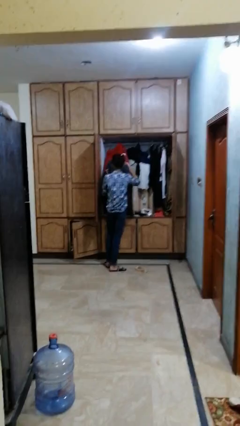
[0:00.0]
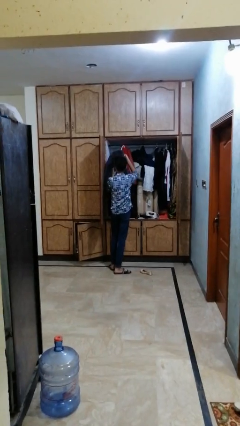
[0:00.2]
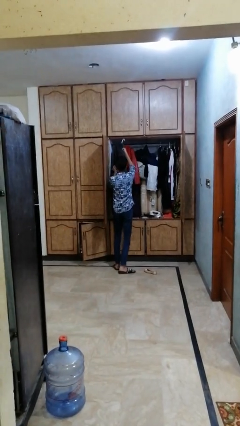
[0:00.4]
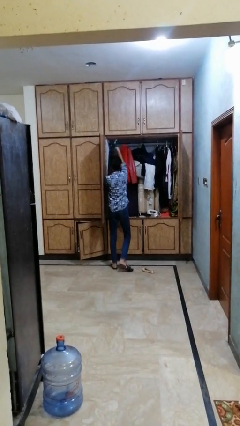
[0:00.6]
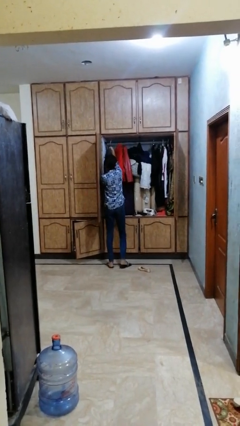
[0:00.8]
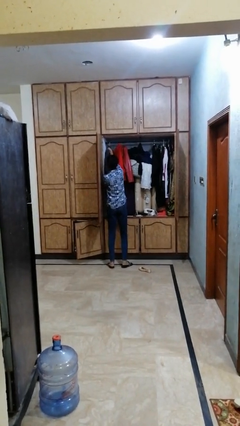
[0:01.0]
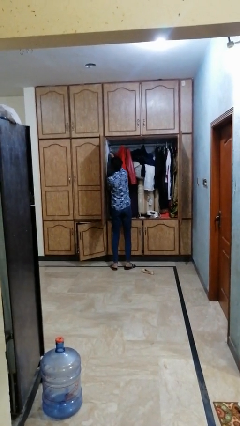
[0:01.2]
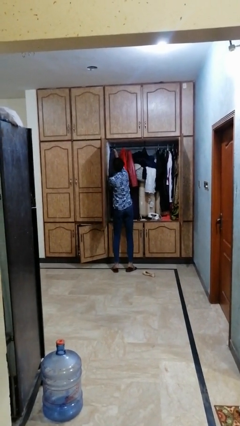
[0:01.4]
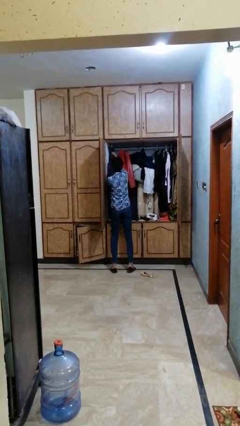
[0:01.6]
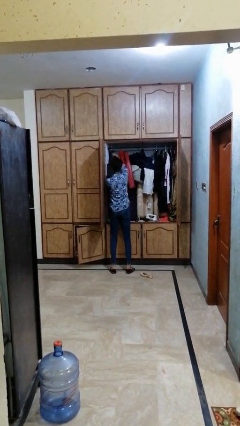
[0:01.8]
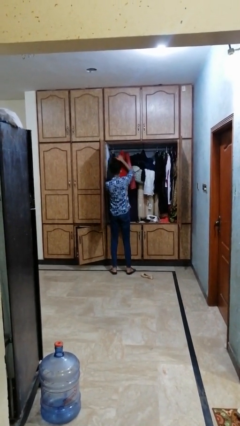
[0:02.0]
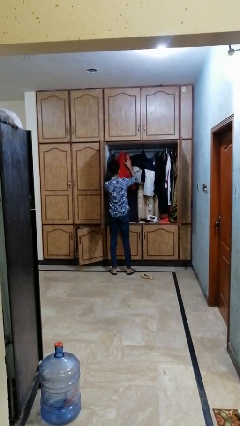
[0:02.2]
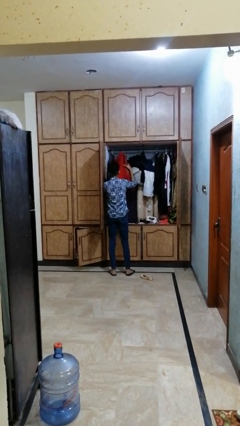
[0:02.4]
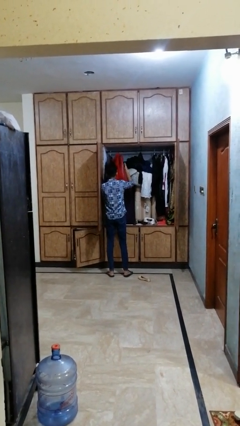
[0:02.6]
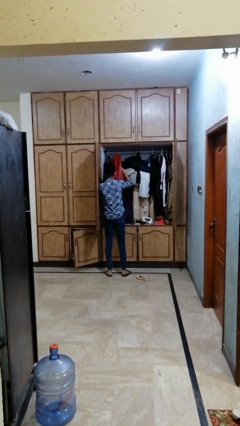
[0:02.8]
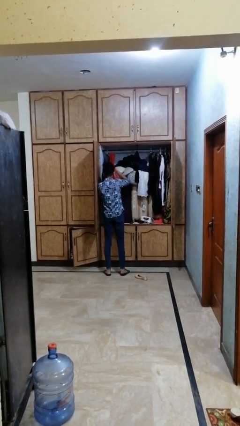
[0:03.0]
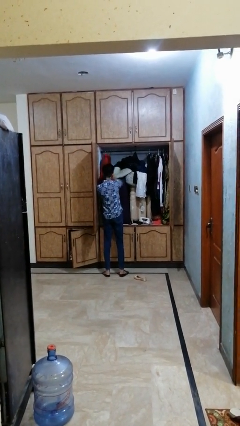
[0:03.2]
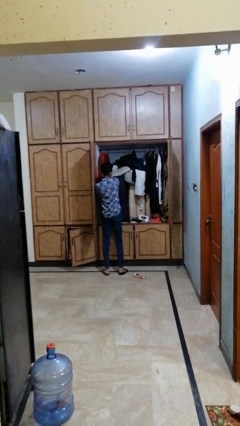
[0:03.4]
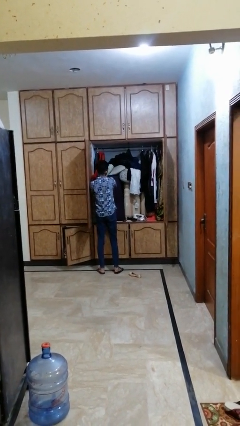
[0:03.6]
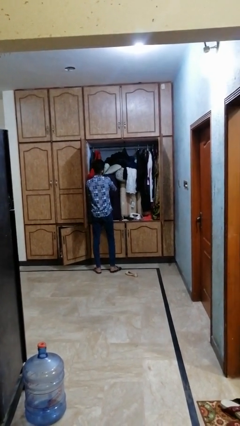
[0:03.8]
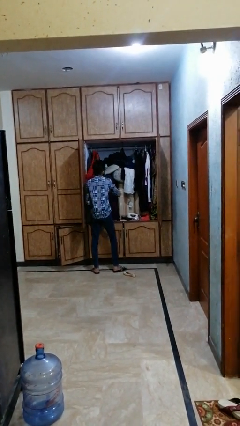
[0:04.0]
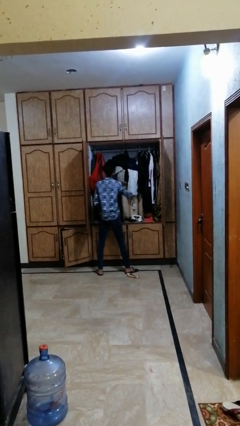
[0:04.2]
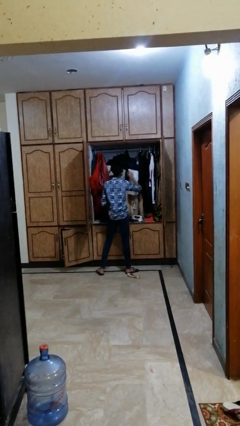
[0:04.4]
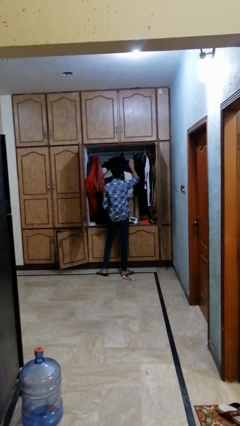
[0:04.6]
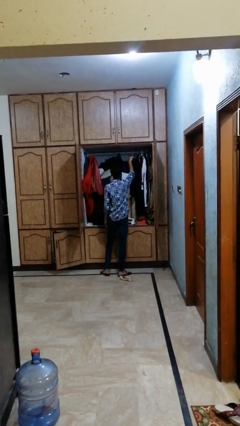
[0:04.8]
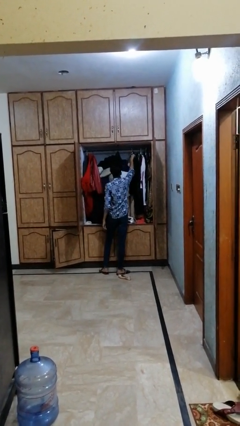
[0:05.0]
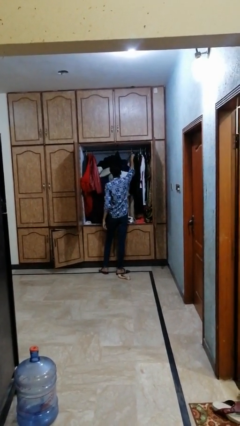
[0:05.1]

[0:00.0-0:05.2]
person puts clothes into dresser

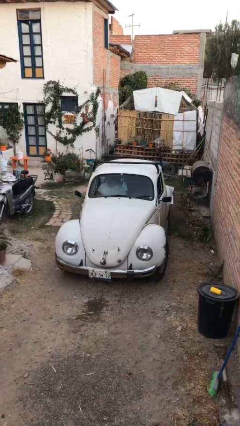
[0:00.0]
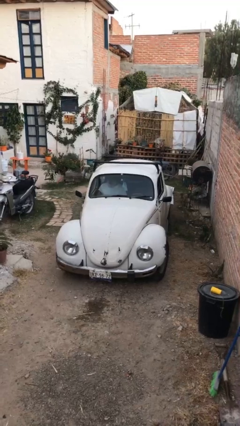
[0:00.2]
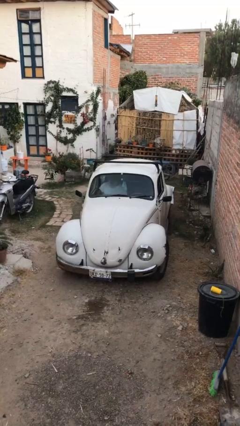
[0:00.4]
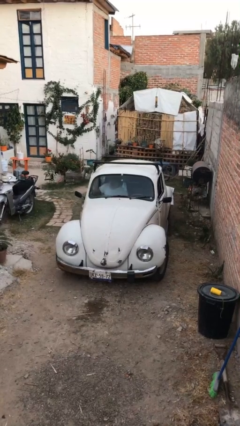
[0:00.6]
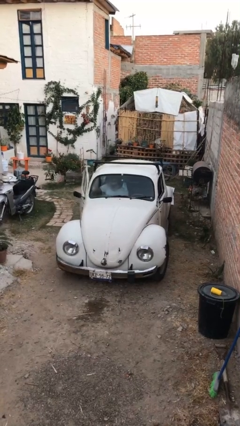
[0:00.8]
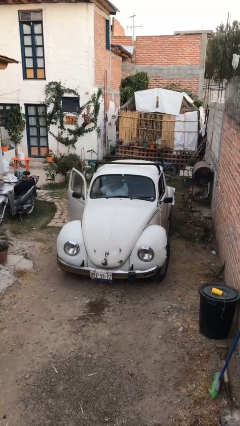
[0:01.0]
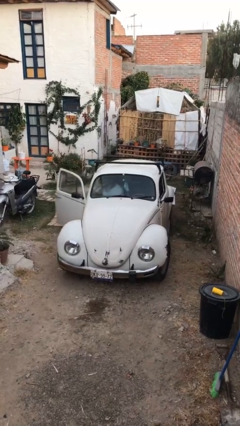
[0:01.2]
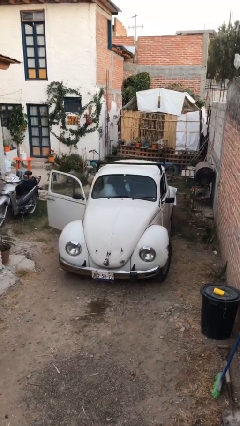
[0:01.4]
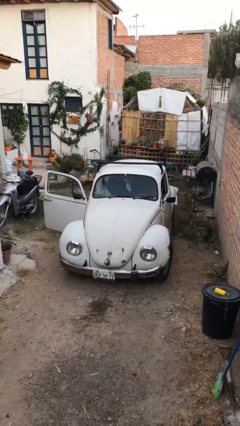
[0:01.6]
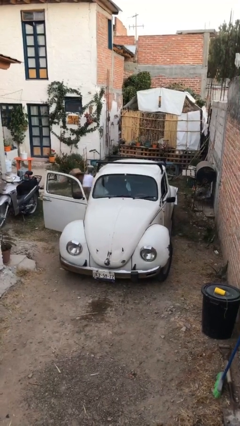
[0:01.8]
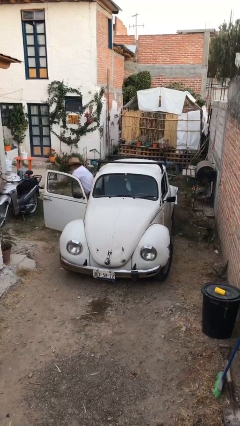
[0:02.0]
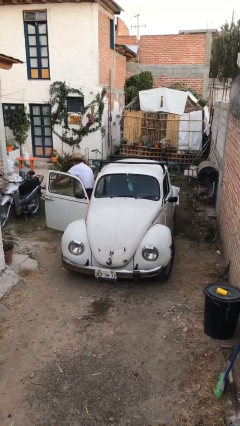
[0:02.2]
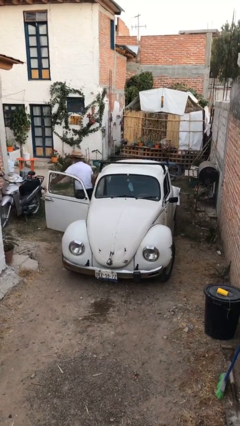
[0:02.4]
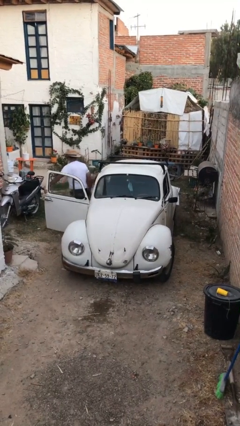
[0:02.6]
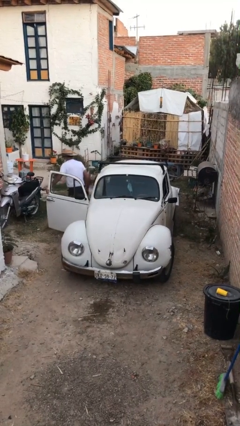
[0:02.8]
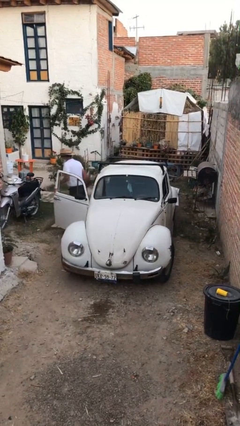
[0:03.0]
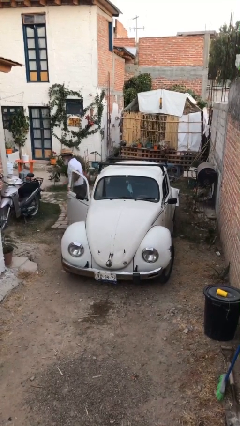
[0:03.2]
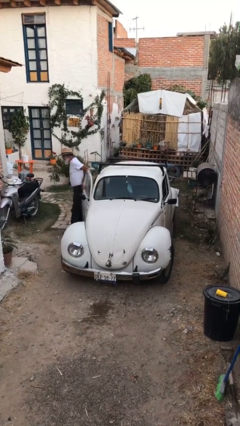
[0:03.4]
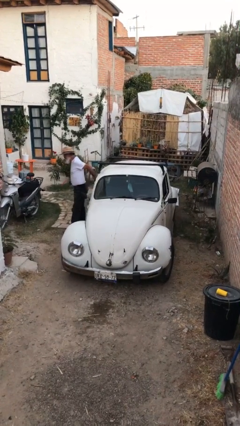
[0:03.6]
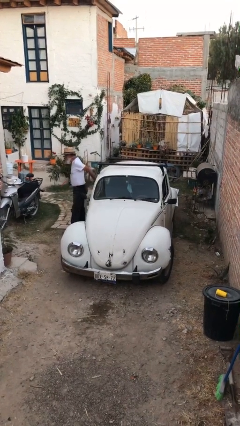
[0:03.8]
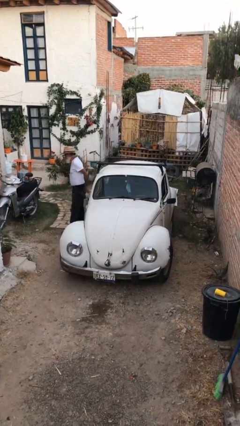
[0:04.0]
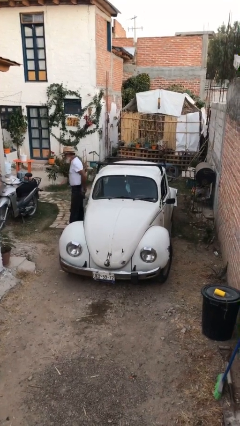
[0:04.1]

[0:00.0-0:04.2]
car drops off person

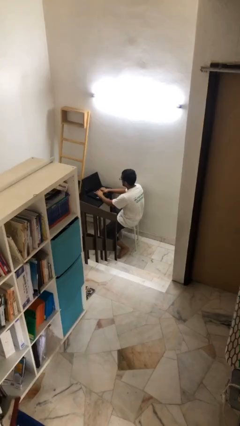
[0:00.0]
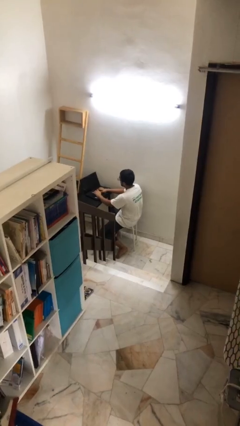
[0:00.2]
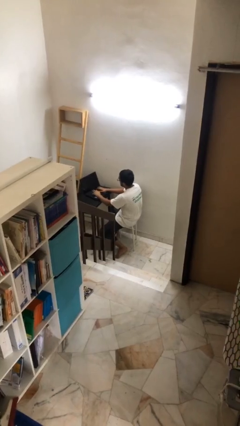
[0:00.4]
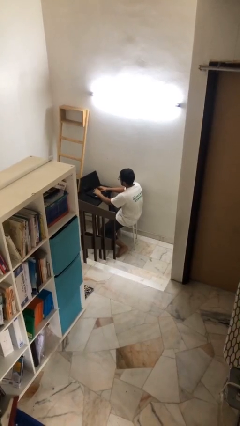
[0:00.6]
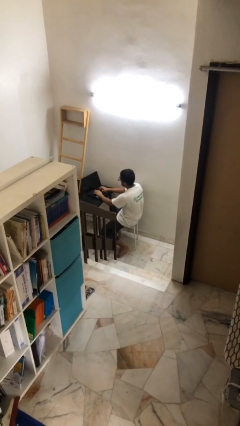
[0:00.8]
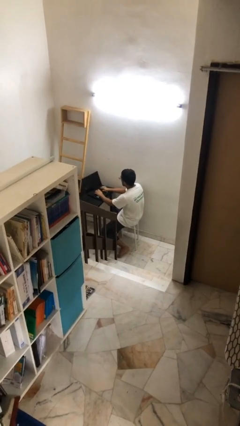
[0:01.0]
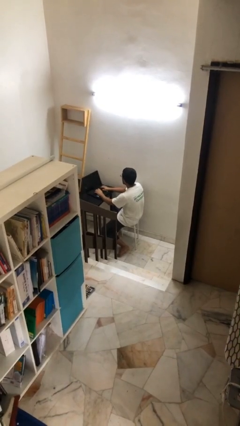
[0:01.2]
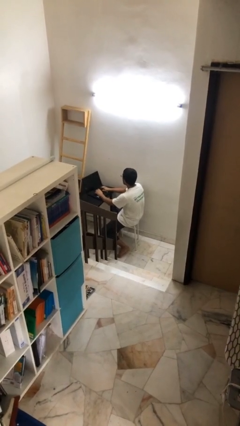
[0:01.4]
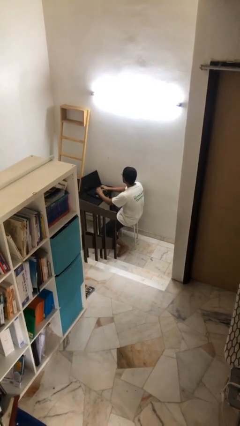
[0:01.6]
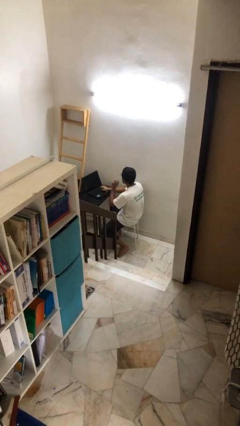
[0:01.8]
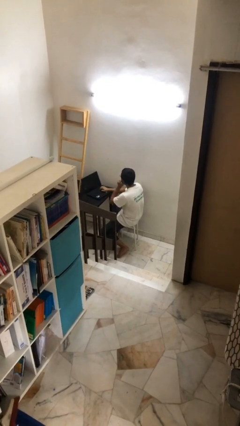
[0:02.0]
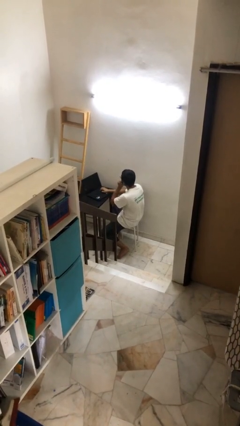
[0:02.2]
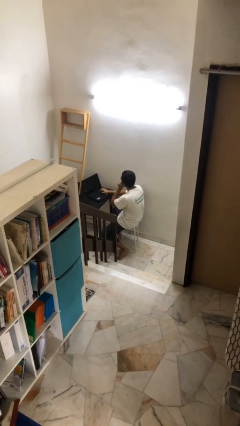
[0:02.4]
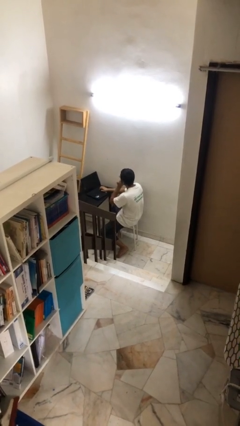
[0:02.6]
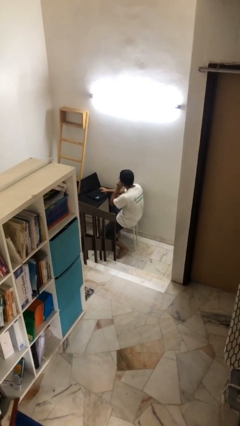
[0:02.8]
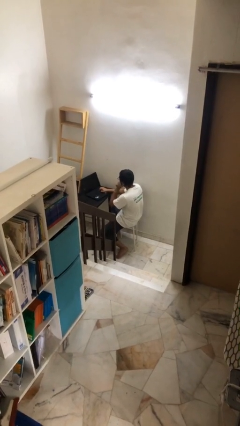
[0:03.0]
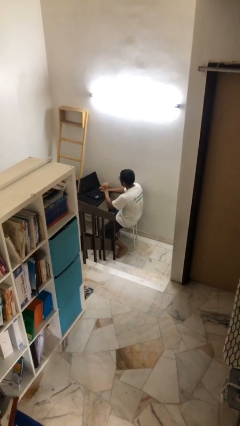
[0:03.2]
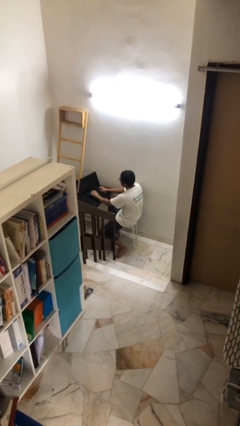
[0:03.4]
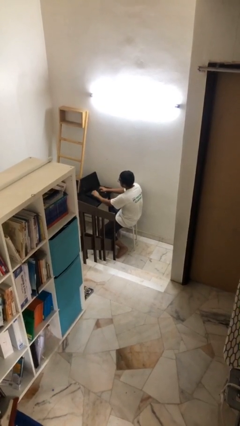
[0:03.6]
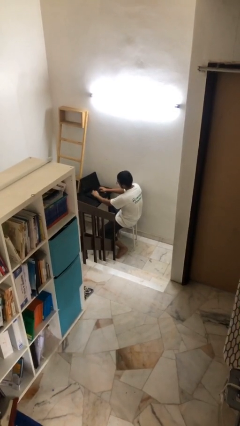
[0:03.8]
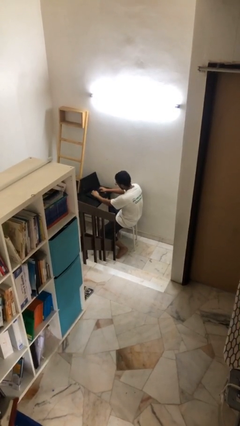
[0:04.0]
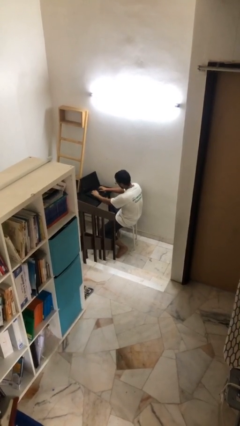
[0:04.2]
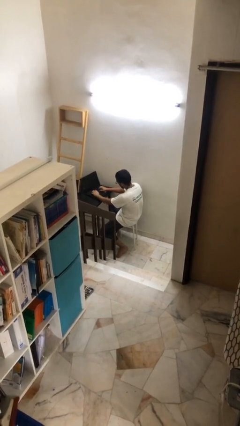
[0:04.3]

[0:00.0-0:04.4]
person interacts with laptop

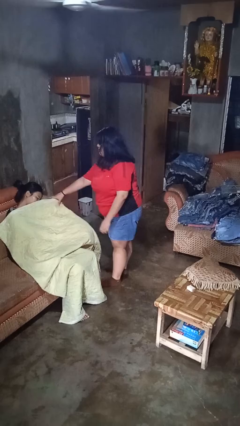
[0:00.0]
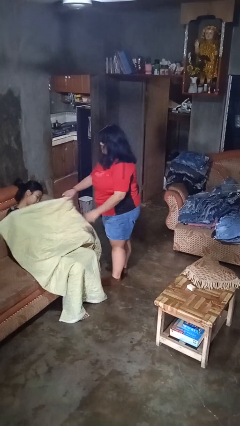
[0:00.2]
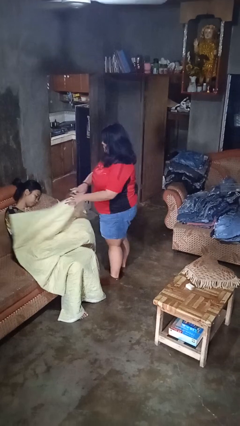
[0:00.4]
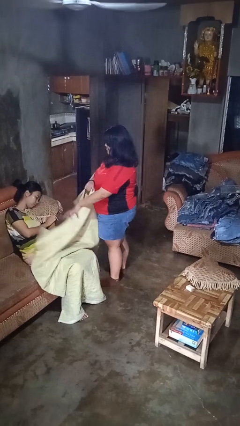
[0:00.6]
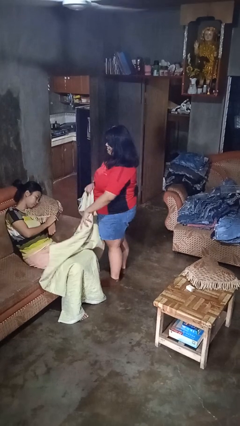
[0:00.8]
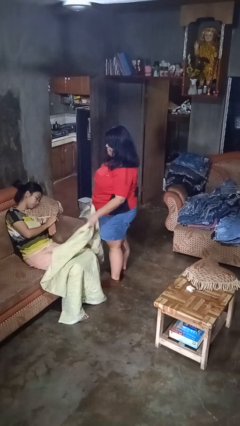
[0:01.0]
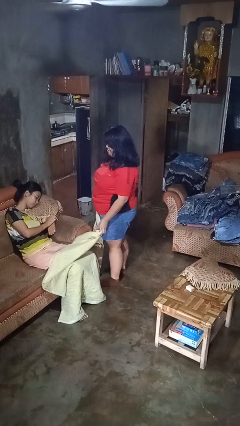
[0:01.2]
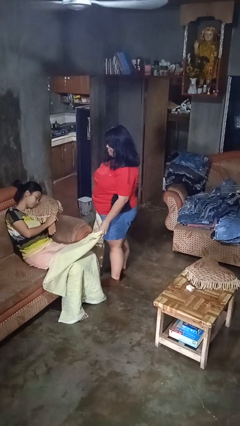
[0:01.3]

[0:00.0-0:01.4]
person uncovers friend with blanket

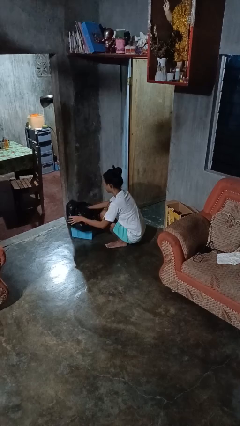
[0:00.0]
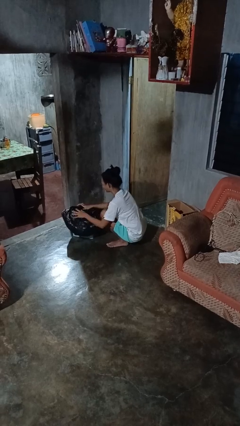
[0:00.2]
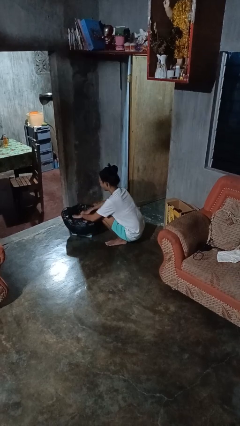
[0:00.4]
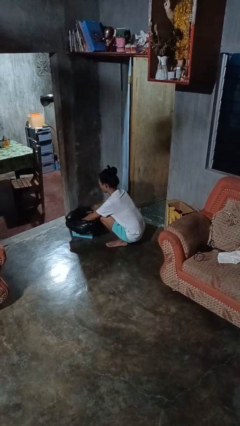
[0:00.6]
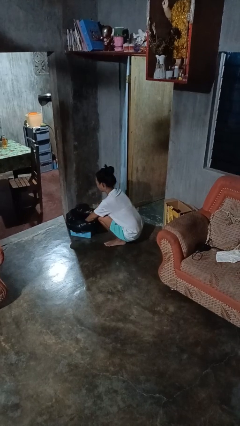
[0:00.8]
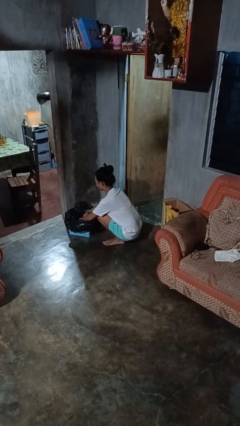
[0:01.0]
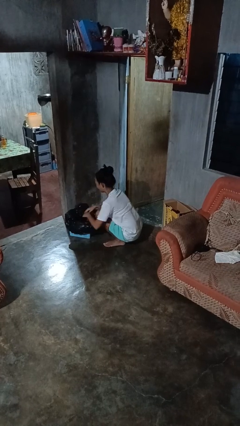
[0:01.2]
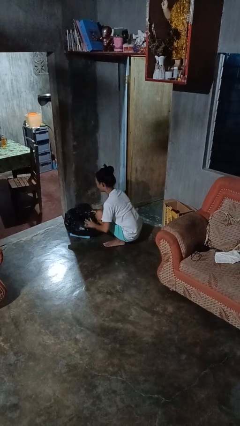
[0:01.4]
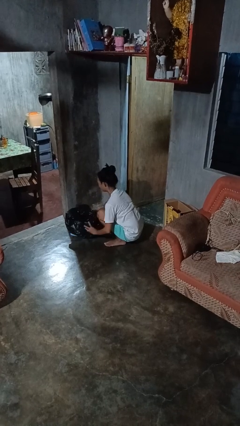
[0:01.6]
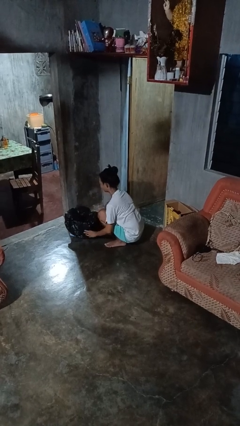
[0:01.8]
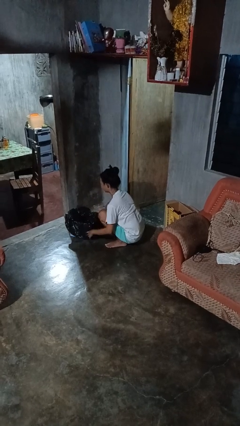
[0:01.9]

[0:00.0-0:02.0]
person inserts trashbag into trashcan

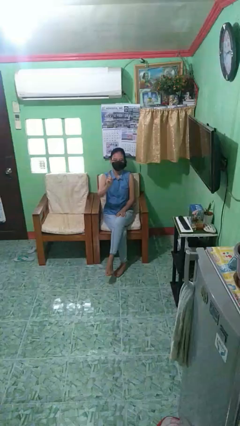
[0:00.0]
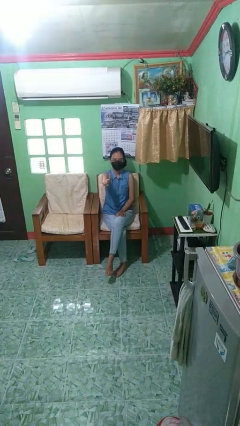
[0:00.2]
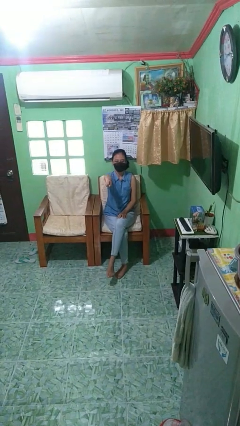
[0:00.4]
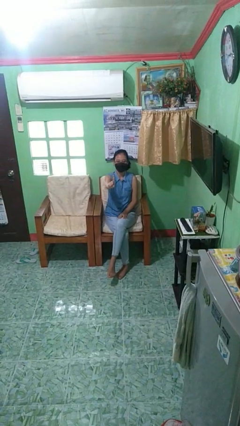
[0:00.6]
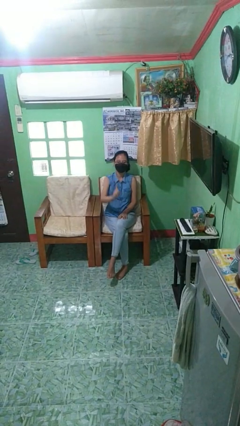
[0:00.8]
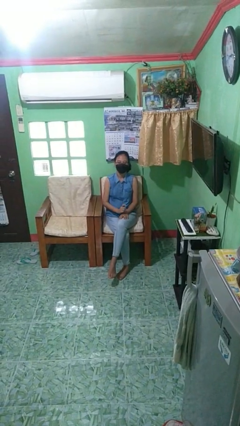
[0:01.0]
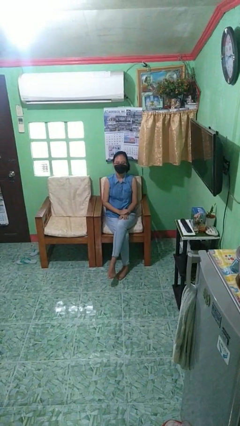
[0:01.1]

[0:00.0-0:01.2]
person gestures number one
